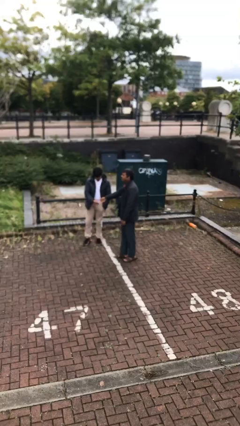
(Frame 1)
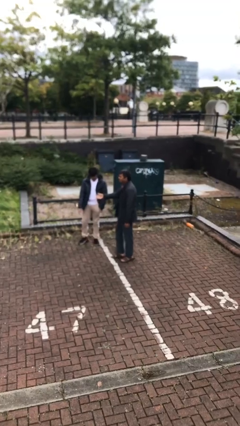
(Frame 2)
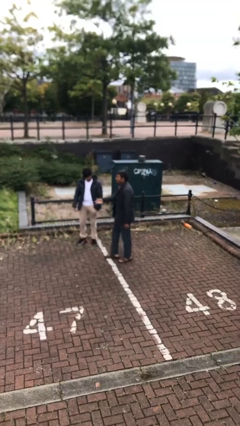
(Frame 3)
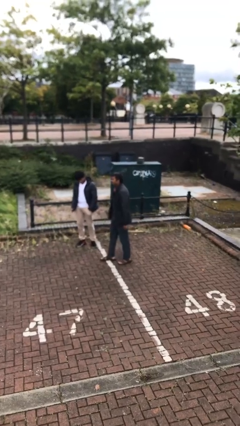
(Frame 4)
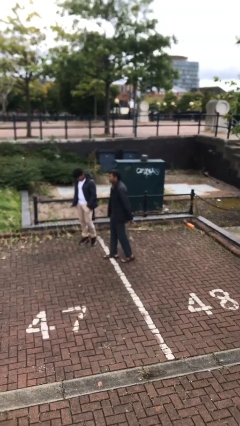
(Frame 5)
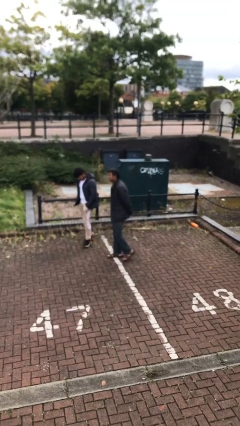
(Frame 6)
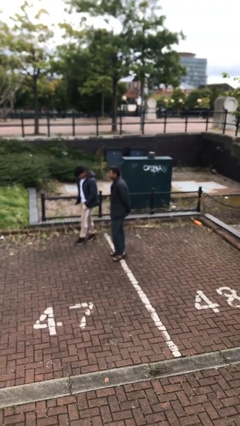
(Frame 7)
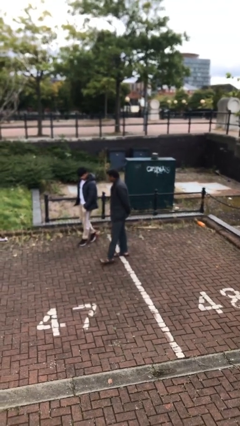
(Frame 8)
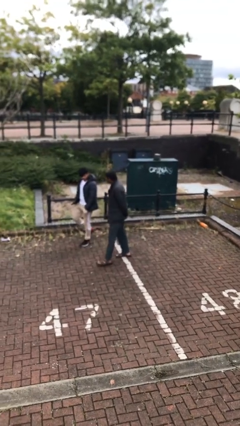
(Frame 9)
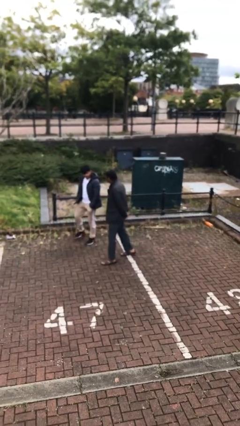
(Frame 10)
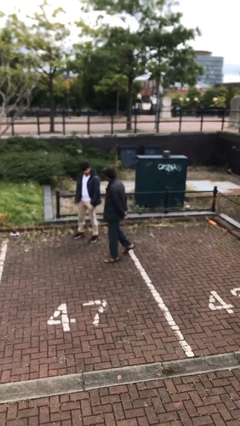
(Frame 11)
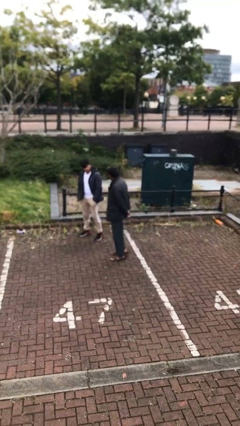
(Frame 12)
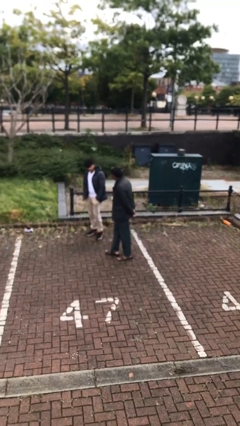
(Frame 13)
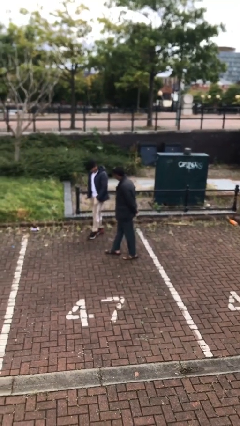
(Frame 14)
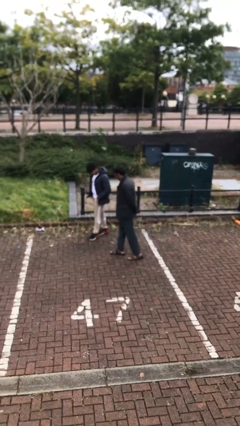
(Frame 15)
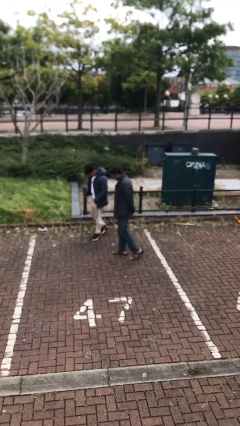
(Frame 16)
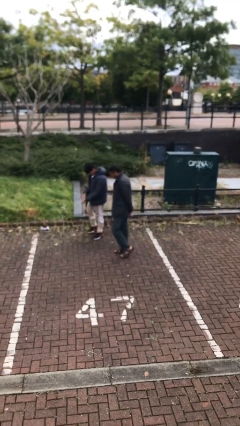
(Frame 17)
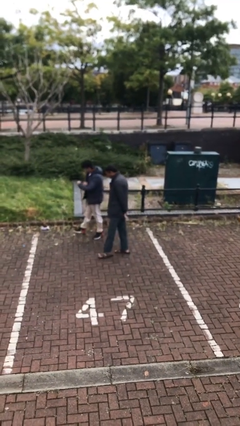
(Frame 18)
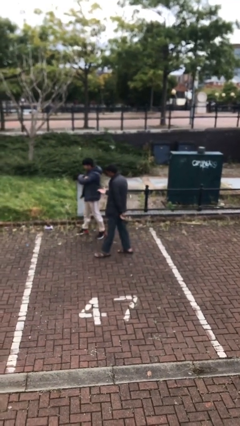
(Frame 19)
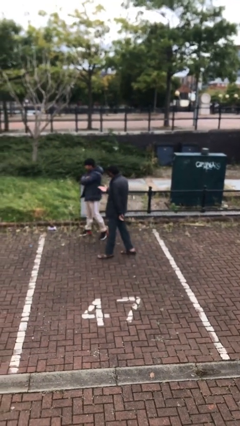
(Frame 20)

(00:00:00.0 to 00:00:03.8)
person talks to person

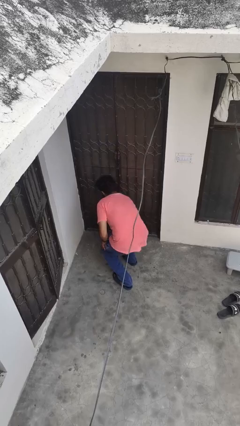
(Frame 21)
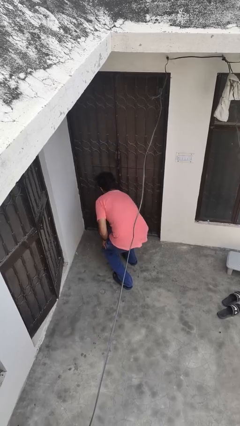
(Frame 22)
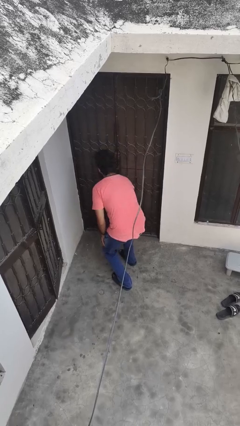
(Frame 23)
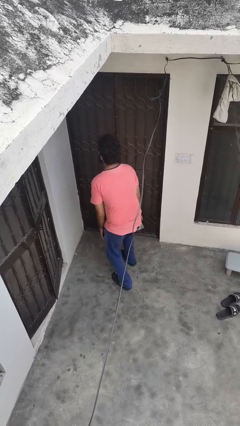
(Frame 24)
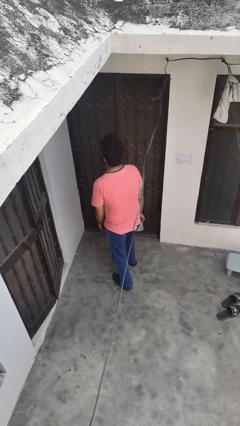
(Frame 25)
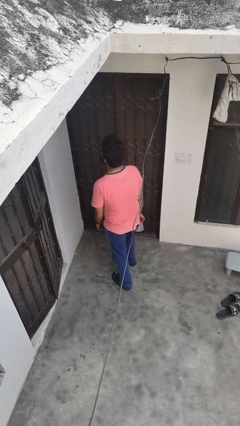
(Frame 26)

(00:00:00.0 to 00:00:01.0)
person picks up object from floor

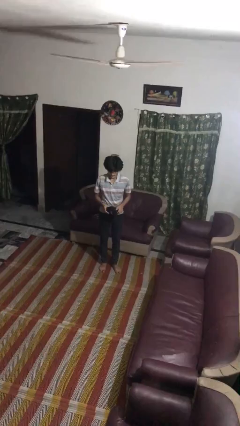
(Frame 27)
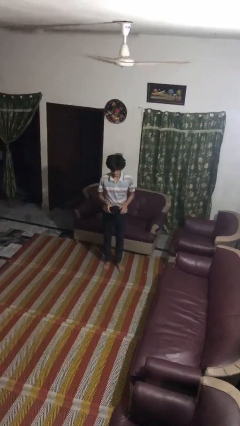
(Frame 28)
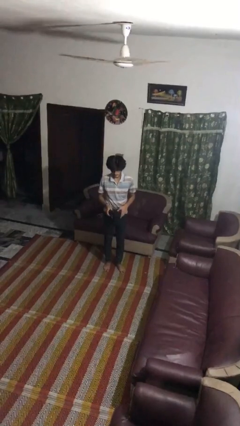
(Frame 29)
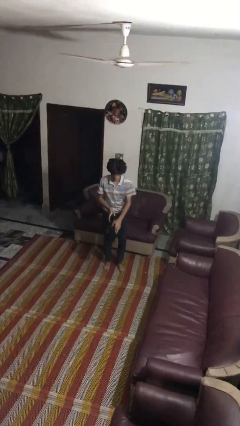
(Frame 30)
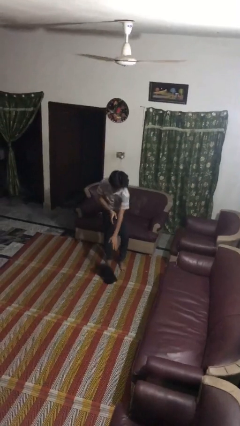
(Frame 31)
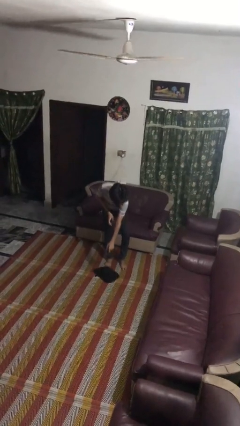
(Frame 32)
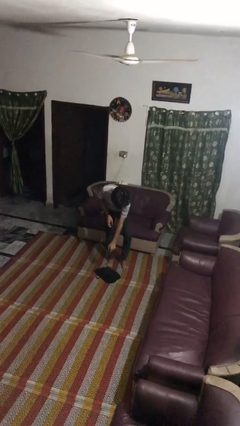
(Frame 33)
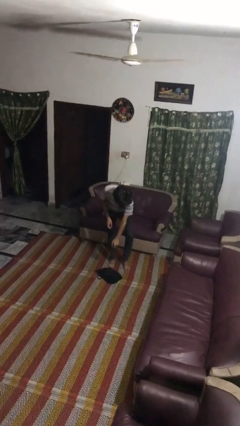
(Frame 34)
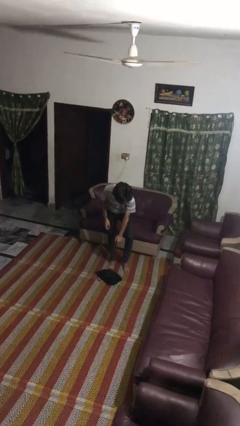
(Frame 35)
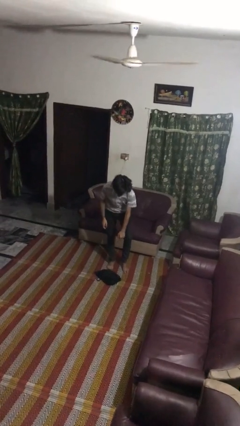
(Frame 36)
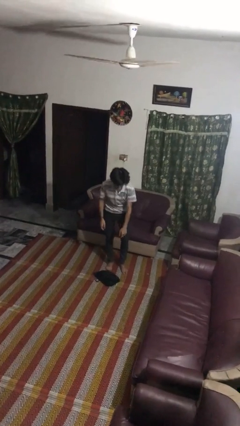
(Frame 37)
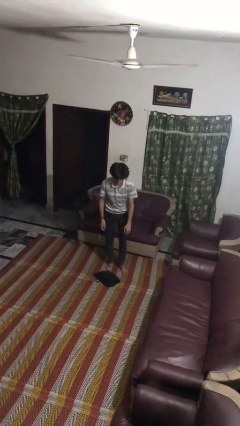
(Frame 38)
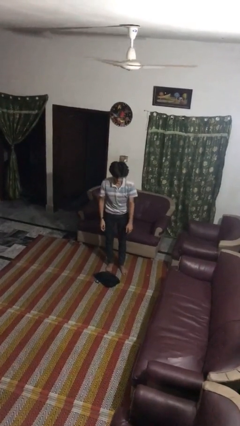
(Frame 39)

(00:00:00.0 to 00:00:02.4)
person drops object

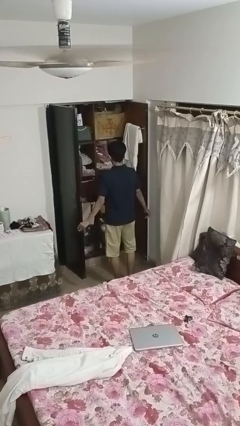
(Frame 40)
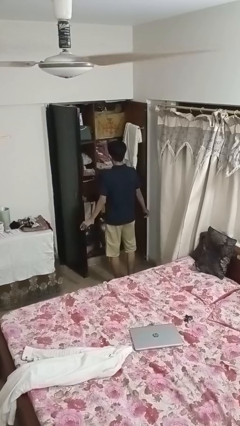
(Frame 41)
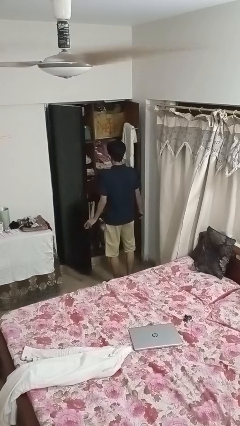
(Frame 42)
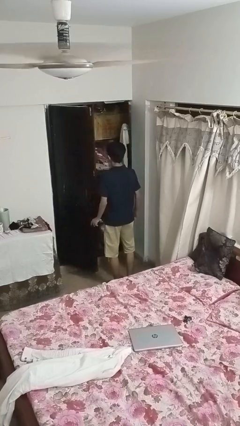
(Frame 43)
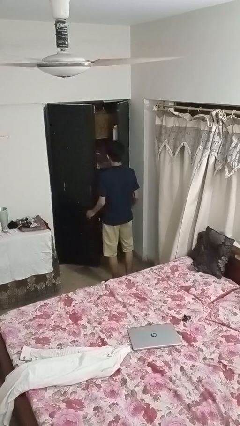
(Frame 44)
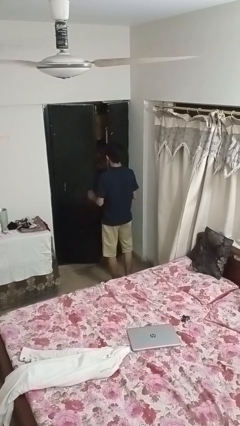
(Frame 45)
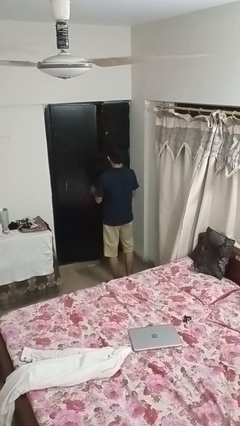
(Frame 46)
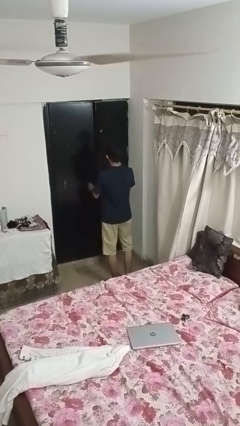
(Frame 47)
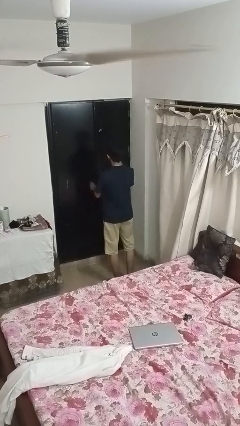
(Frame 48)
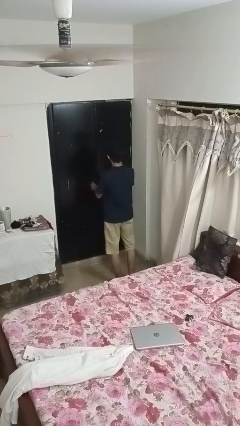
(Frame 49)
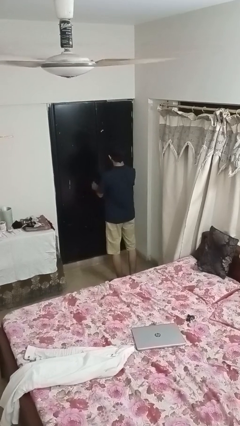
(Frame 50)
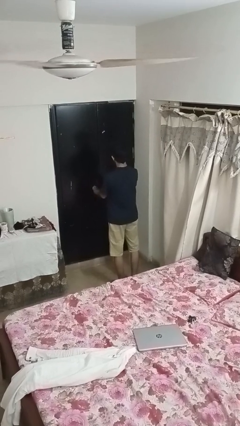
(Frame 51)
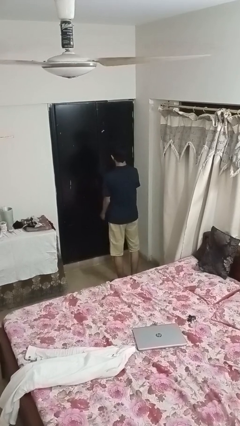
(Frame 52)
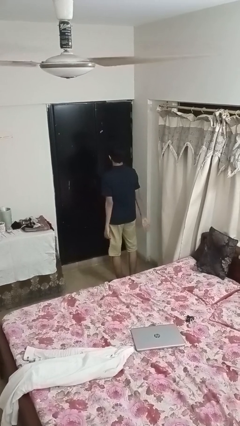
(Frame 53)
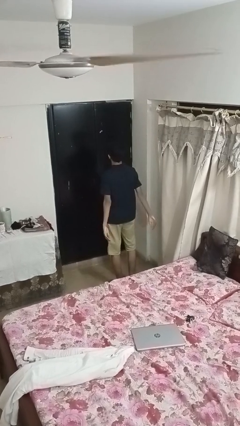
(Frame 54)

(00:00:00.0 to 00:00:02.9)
person closes closet door

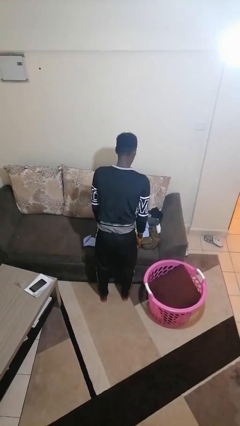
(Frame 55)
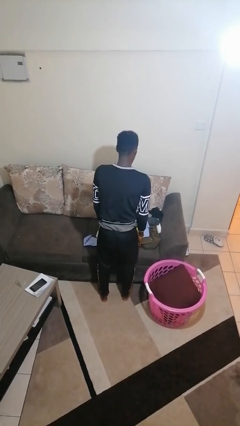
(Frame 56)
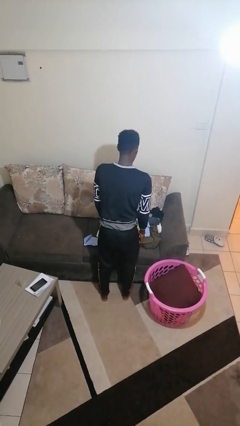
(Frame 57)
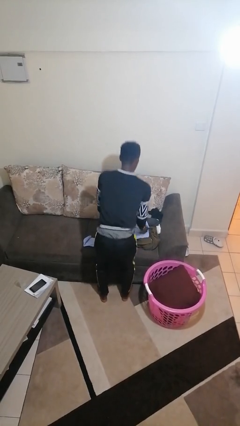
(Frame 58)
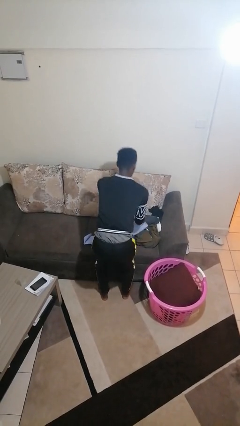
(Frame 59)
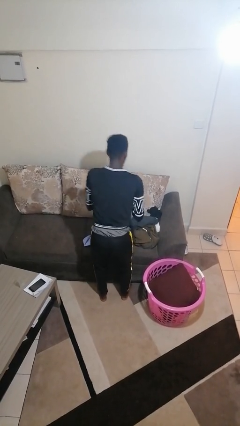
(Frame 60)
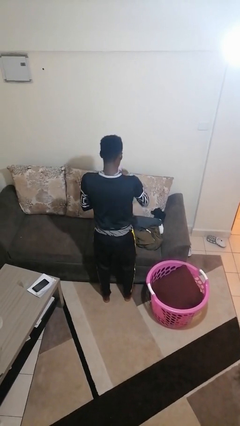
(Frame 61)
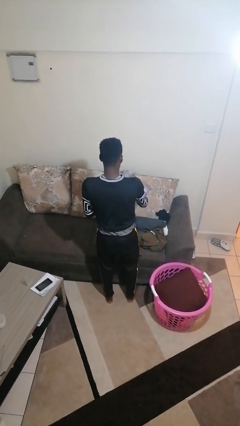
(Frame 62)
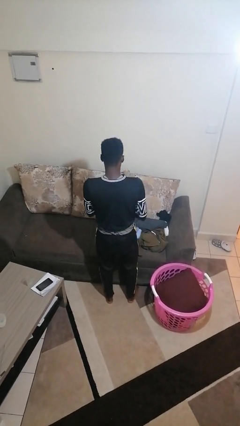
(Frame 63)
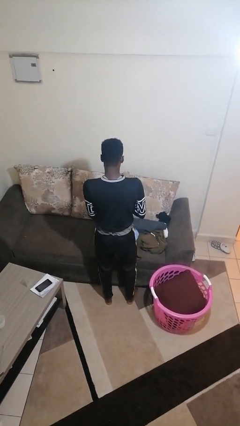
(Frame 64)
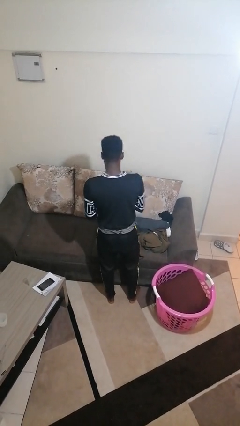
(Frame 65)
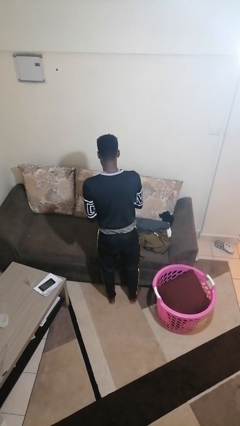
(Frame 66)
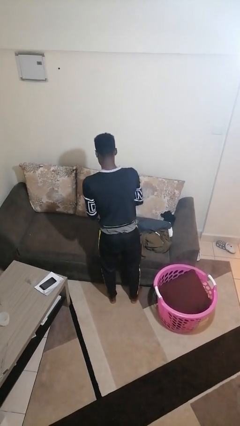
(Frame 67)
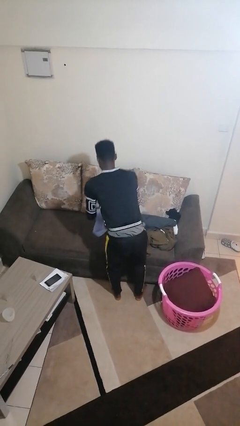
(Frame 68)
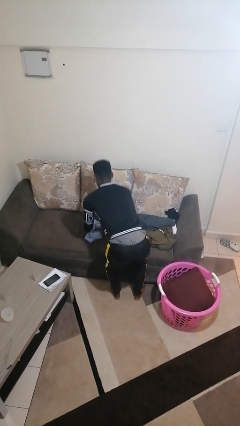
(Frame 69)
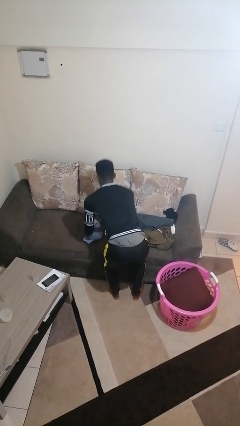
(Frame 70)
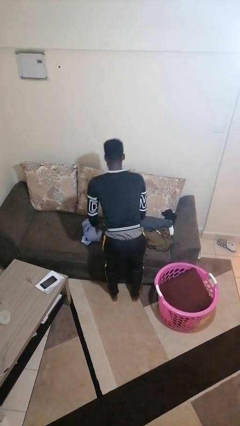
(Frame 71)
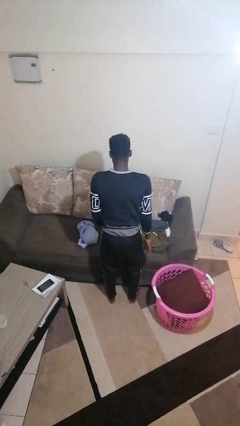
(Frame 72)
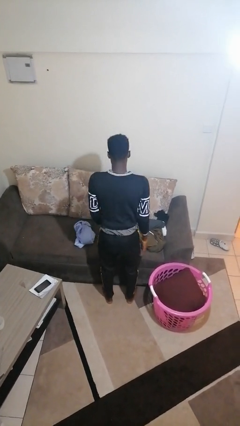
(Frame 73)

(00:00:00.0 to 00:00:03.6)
person folds shirt

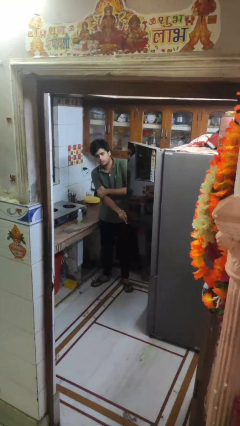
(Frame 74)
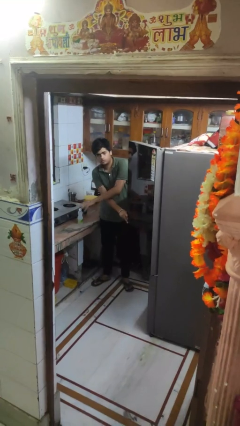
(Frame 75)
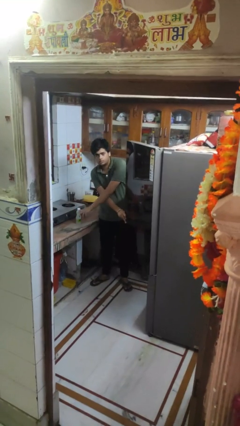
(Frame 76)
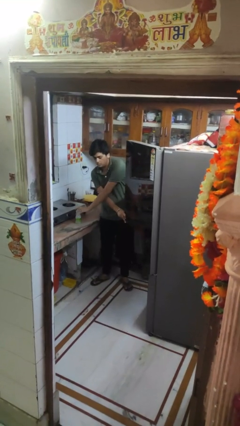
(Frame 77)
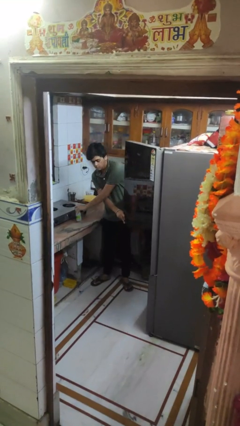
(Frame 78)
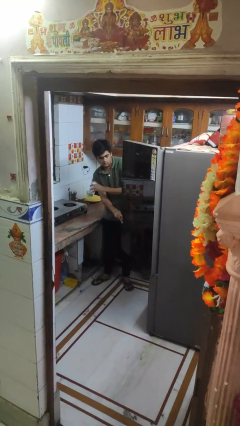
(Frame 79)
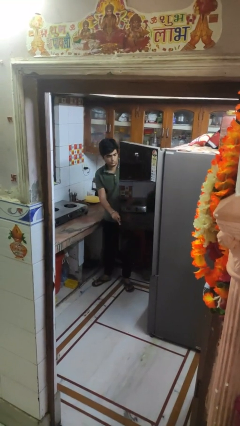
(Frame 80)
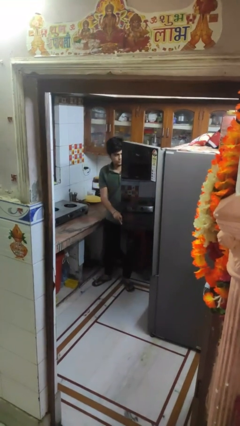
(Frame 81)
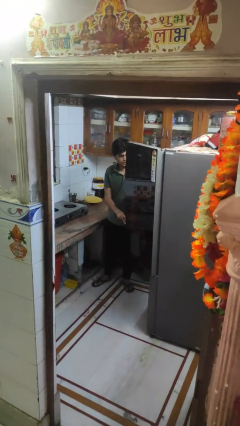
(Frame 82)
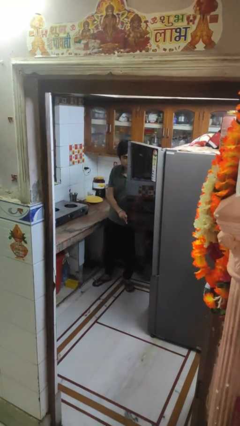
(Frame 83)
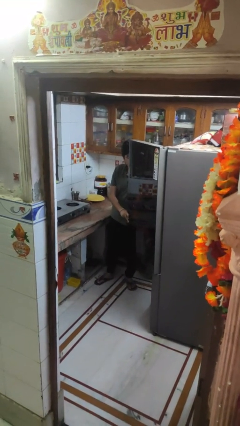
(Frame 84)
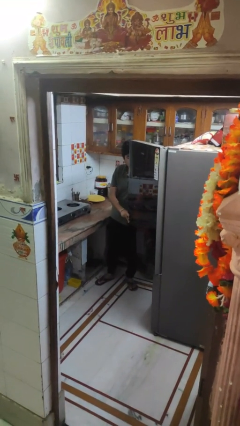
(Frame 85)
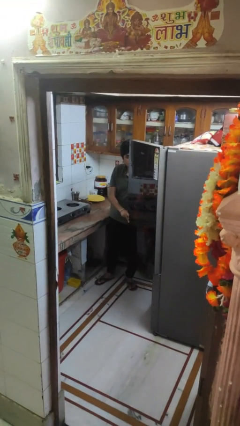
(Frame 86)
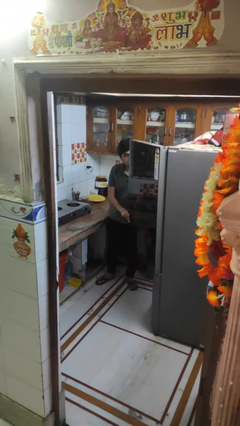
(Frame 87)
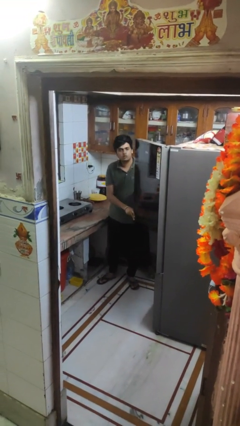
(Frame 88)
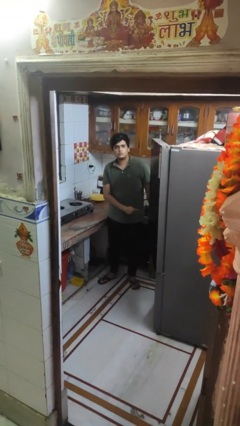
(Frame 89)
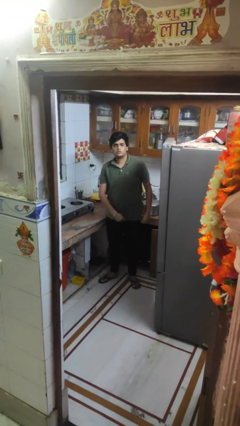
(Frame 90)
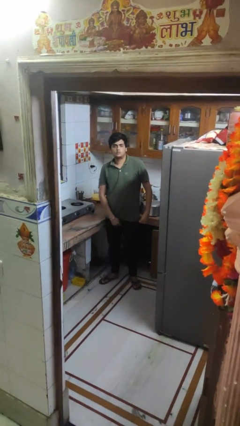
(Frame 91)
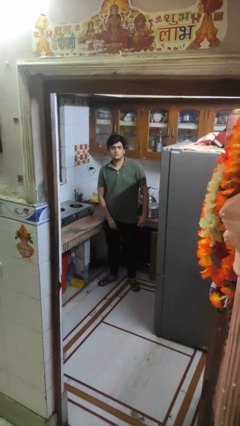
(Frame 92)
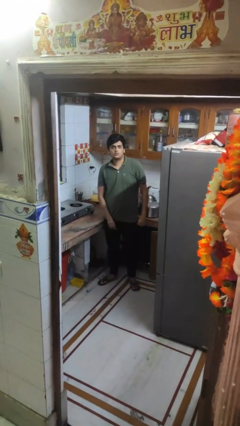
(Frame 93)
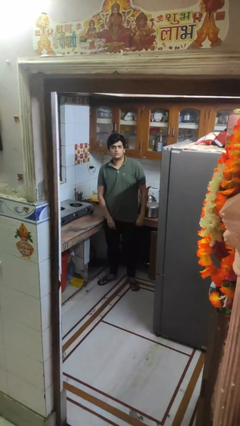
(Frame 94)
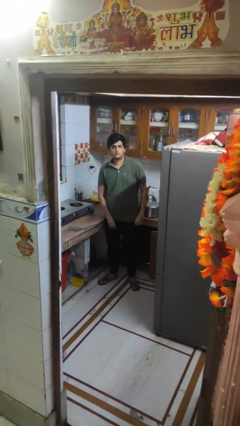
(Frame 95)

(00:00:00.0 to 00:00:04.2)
person puts object into refrigerator
